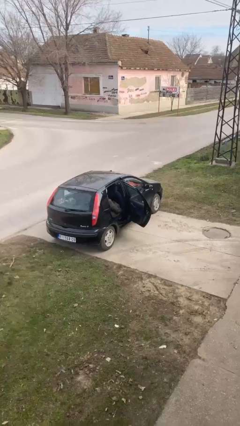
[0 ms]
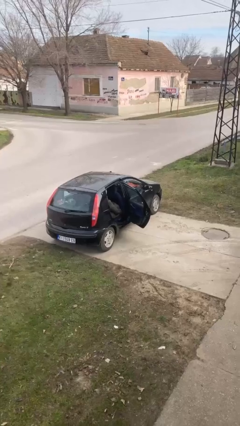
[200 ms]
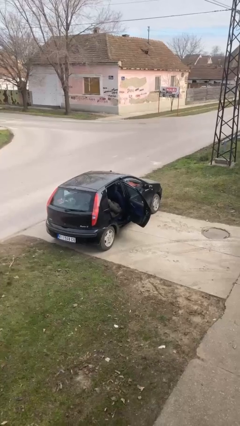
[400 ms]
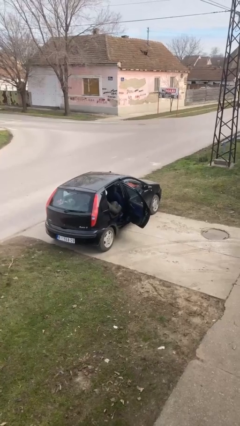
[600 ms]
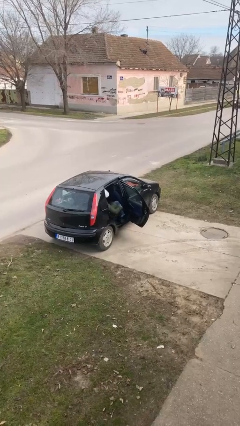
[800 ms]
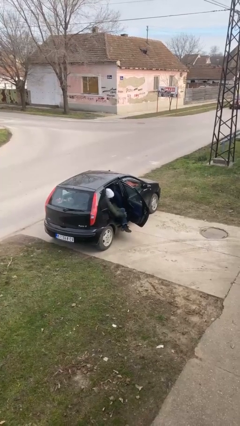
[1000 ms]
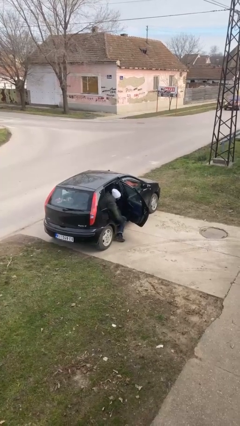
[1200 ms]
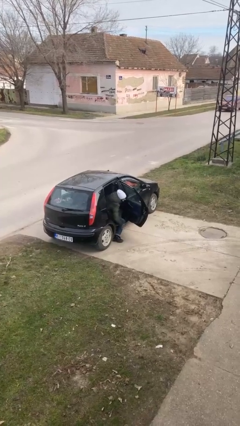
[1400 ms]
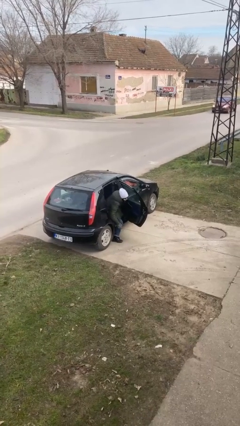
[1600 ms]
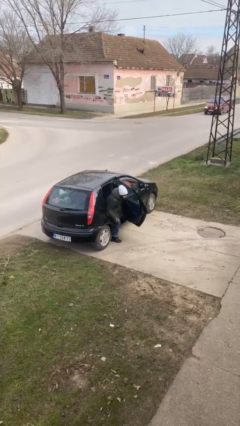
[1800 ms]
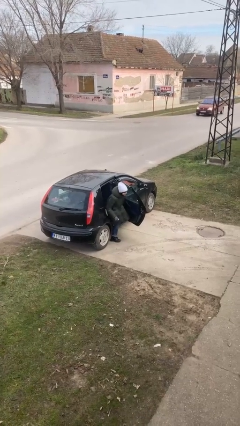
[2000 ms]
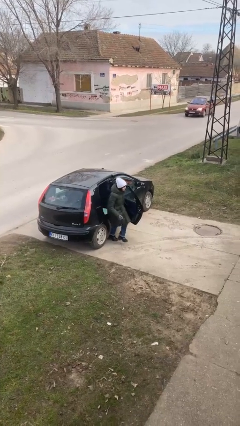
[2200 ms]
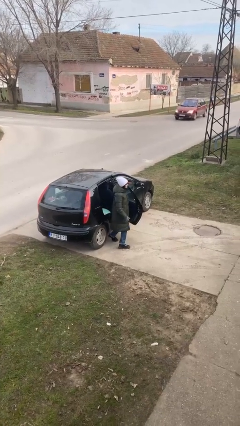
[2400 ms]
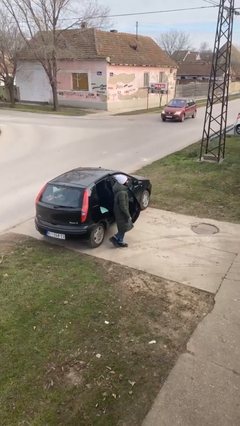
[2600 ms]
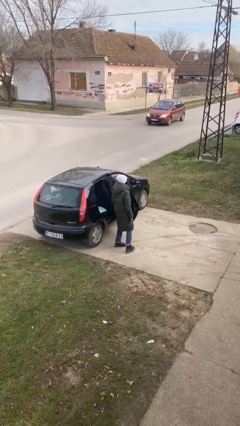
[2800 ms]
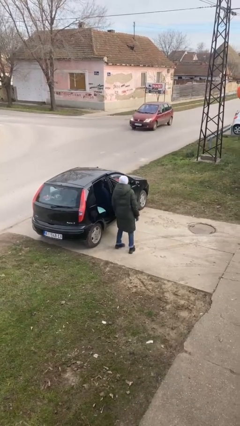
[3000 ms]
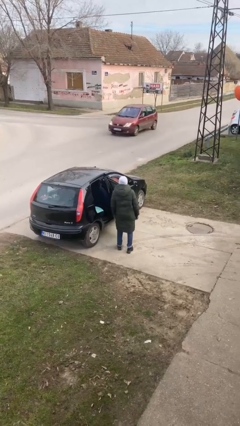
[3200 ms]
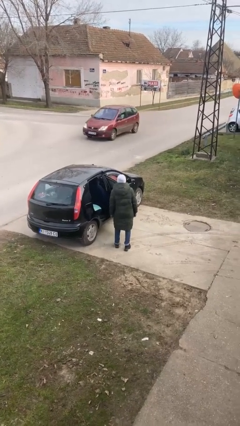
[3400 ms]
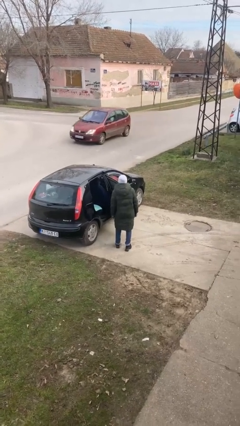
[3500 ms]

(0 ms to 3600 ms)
person exits car

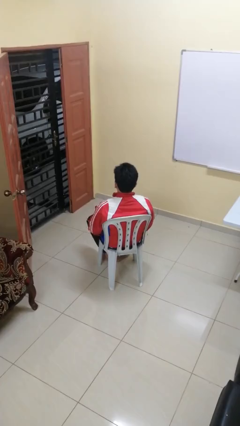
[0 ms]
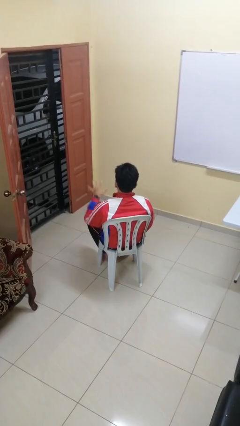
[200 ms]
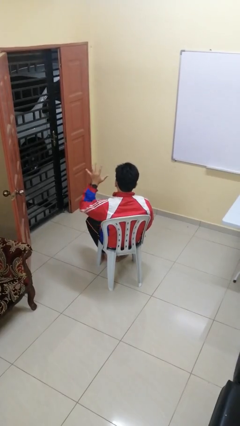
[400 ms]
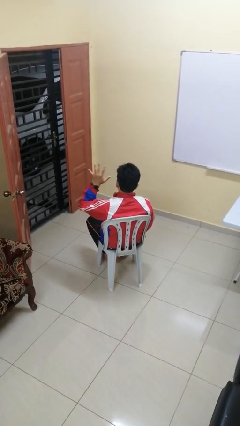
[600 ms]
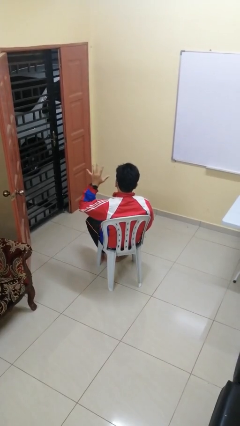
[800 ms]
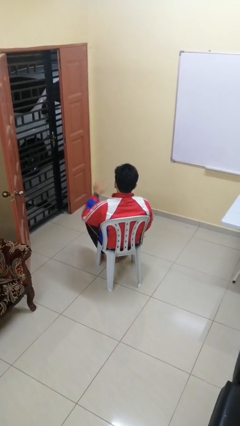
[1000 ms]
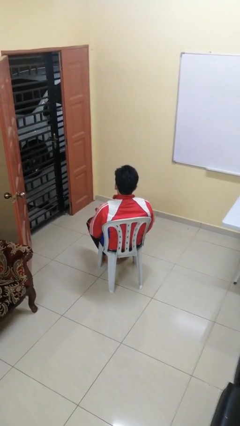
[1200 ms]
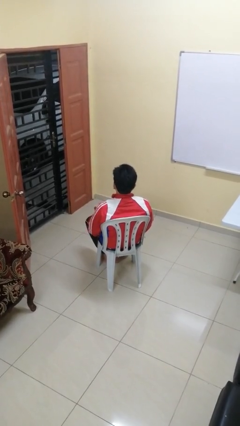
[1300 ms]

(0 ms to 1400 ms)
person gestures number five

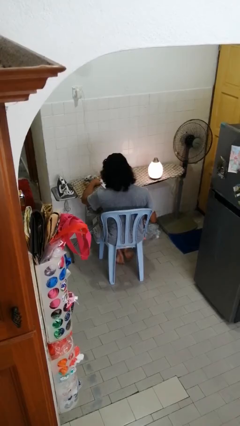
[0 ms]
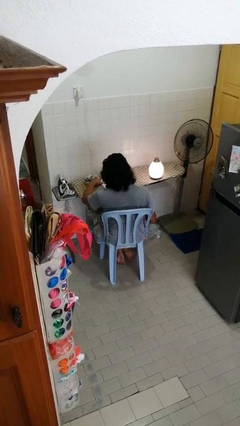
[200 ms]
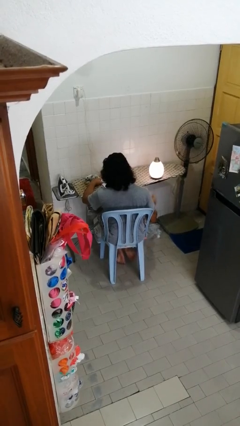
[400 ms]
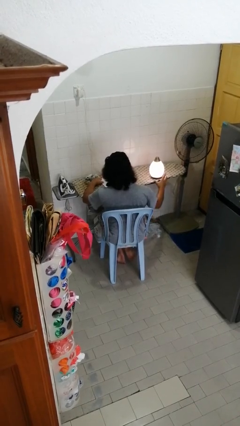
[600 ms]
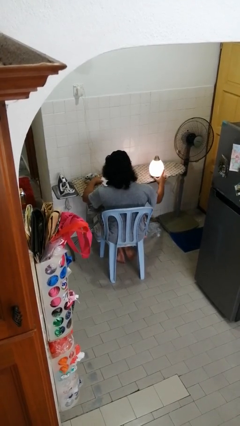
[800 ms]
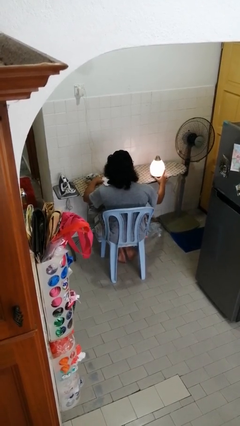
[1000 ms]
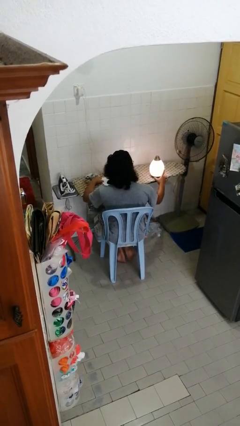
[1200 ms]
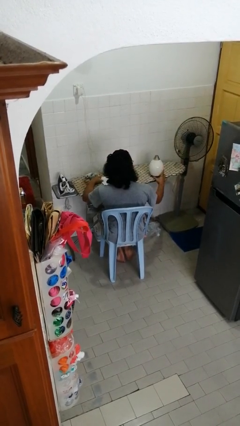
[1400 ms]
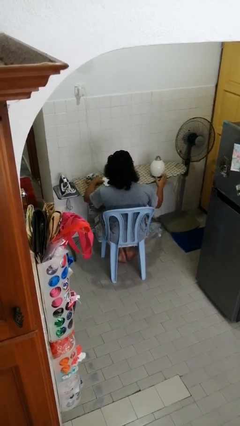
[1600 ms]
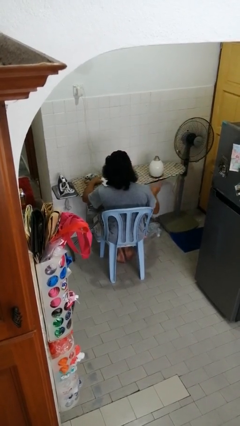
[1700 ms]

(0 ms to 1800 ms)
person turns off lamp

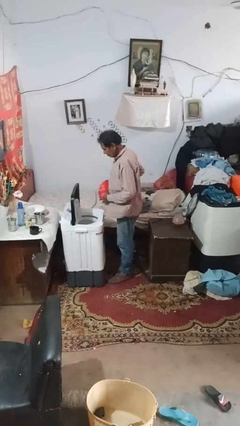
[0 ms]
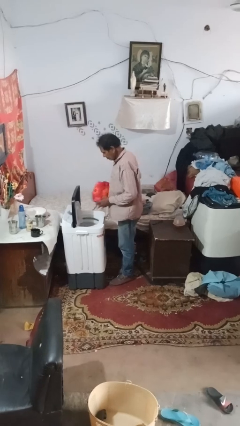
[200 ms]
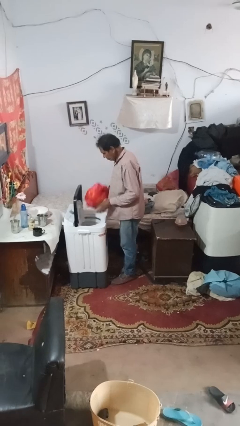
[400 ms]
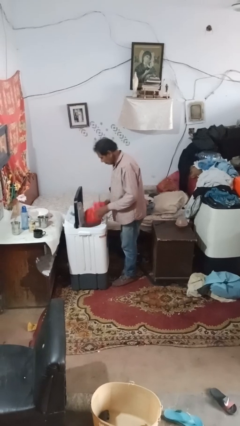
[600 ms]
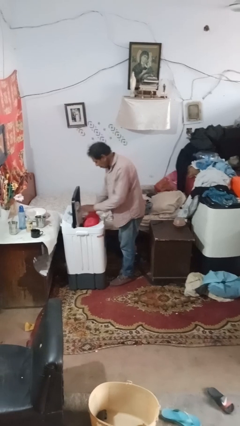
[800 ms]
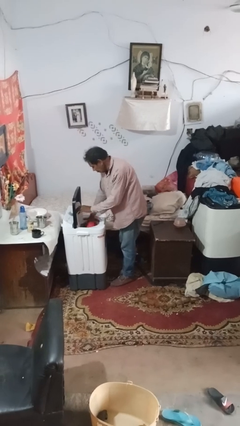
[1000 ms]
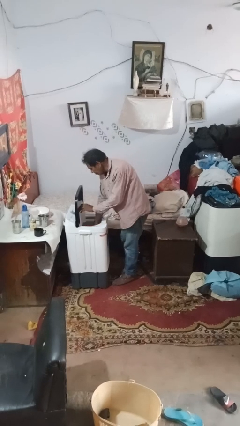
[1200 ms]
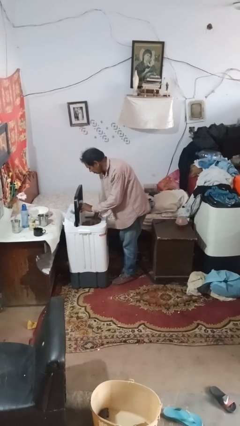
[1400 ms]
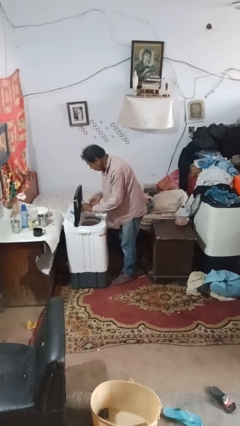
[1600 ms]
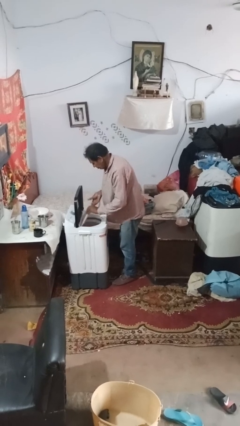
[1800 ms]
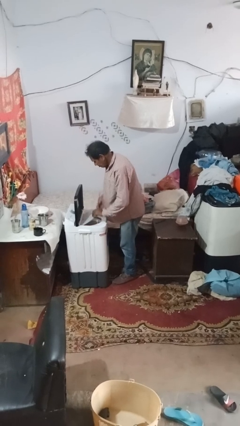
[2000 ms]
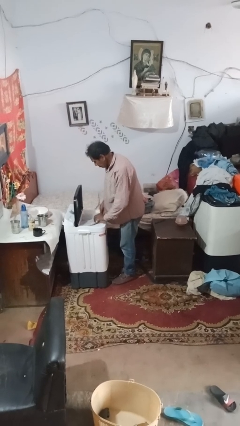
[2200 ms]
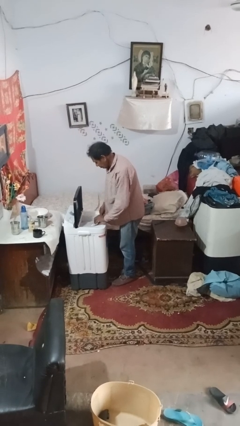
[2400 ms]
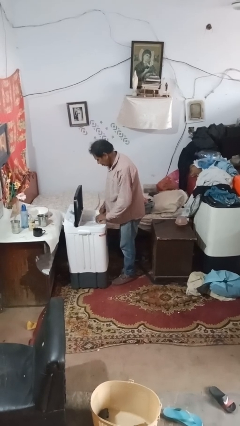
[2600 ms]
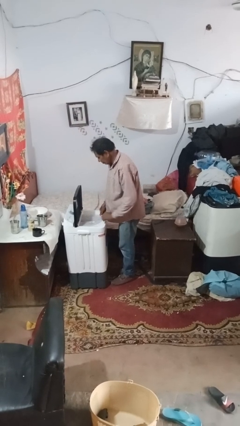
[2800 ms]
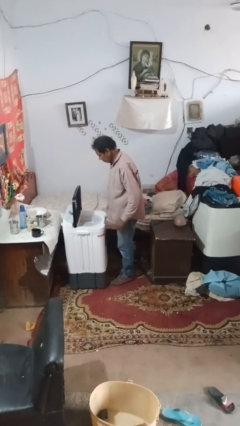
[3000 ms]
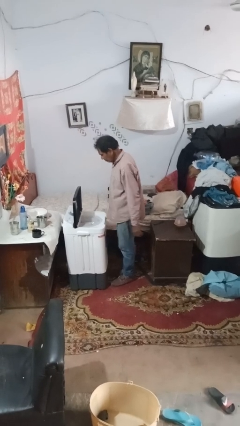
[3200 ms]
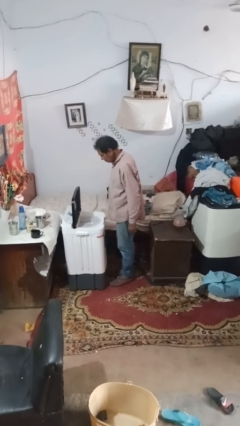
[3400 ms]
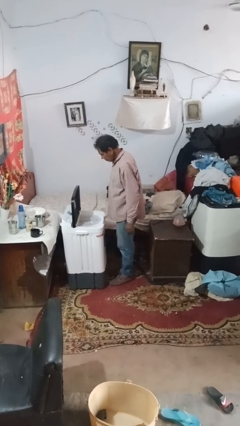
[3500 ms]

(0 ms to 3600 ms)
person loads dryer

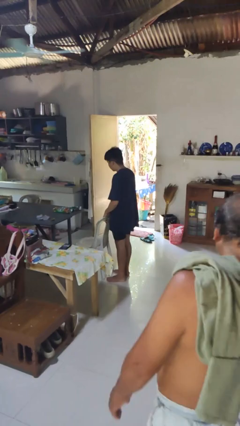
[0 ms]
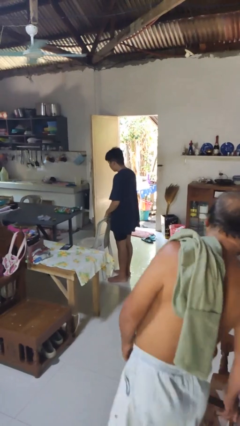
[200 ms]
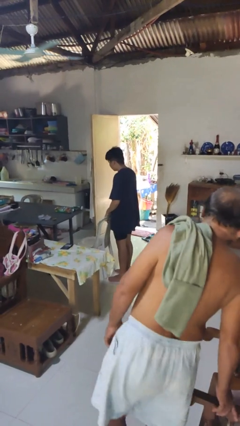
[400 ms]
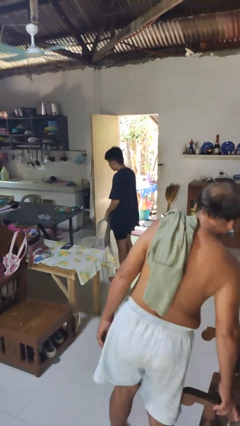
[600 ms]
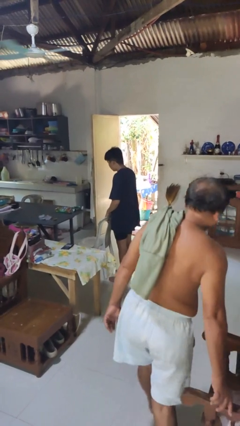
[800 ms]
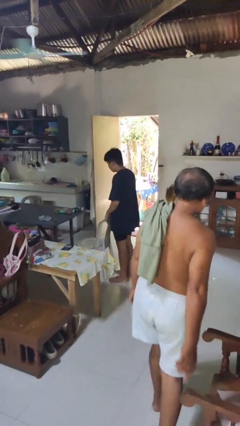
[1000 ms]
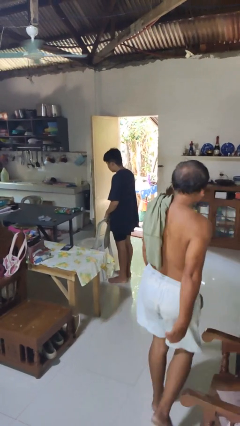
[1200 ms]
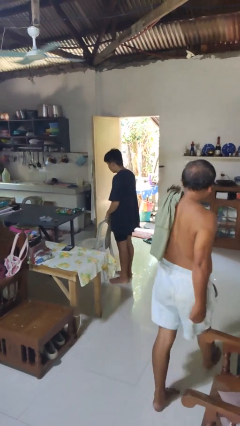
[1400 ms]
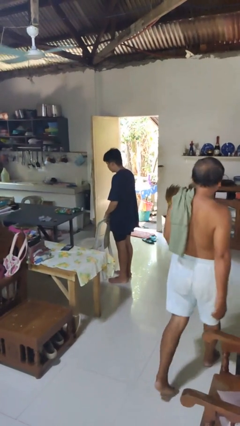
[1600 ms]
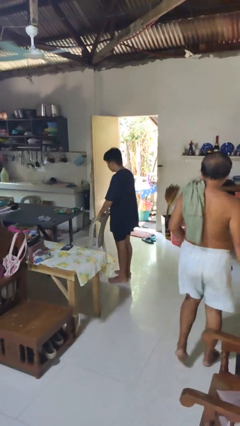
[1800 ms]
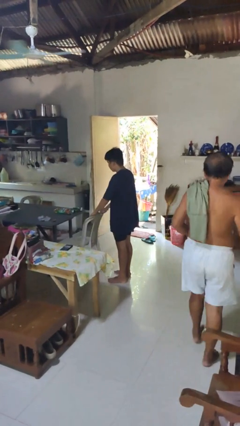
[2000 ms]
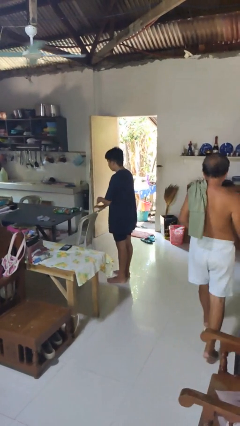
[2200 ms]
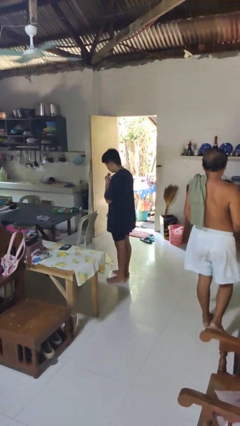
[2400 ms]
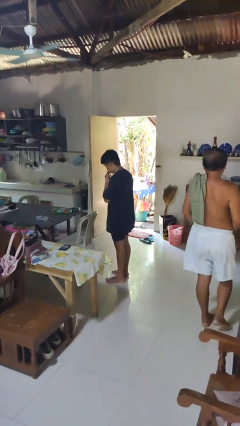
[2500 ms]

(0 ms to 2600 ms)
person pushes in chair

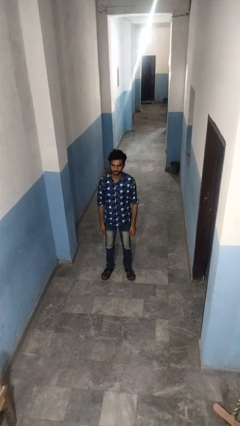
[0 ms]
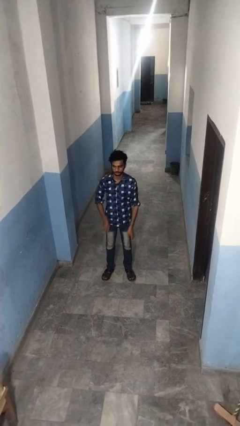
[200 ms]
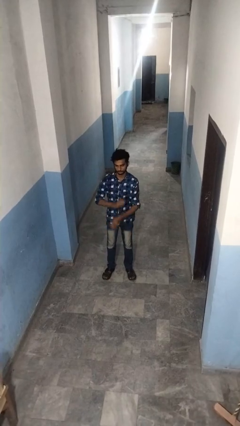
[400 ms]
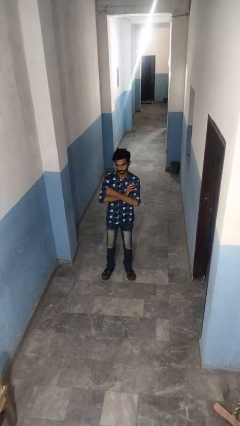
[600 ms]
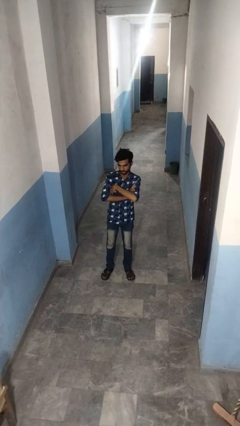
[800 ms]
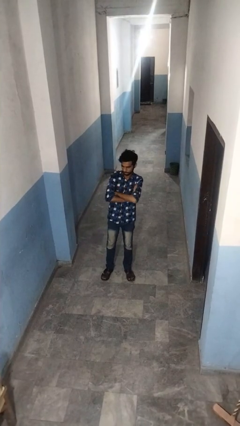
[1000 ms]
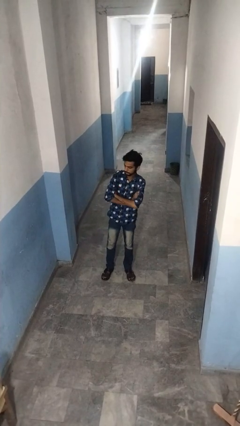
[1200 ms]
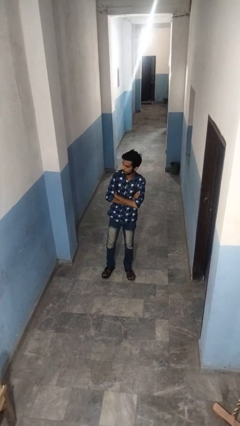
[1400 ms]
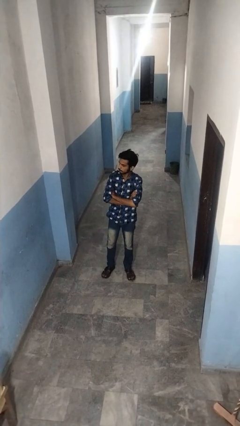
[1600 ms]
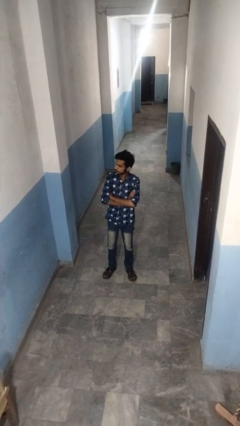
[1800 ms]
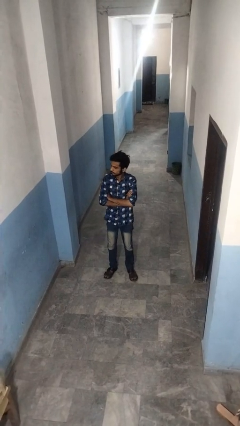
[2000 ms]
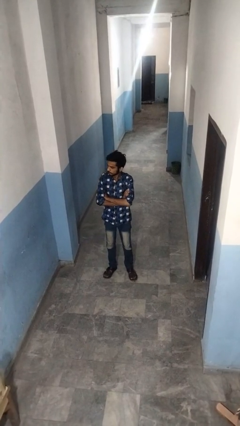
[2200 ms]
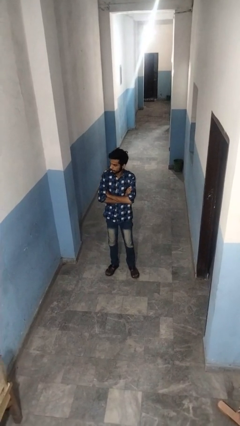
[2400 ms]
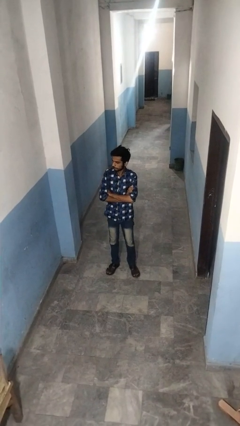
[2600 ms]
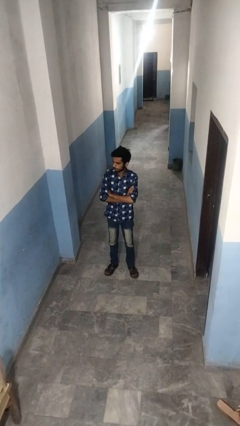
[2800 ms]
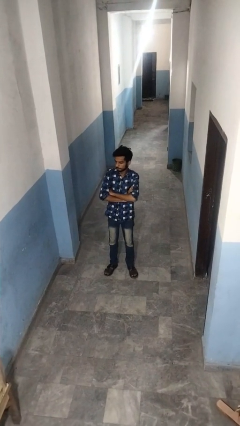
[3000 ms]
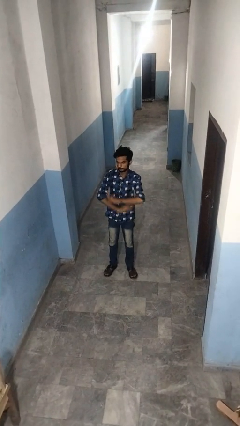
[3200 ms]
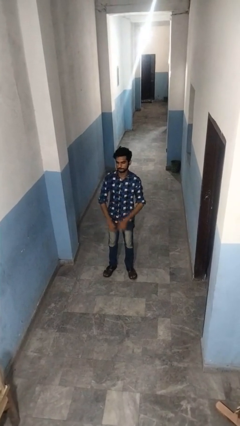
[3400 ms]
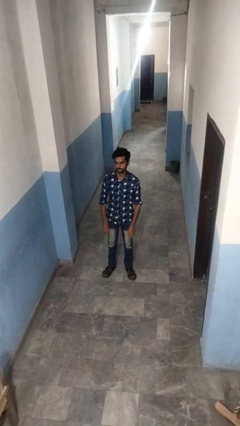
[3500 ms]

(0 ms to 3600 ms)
person crosses arms

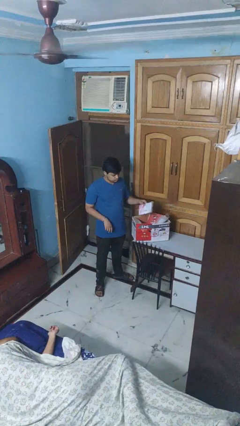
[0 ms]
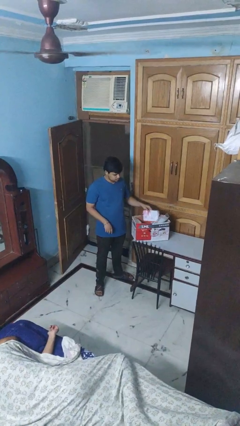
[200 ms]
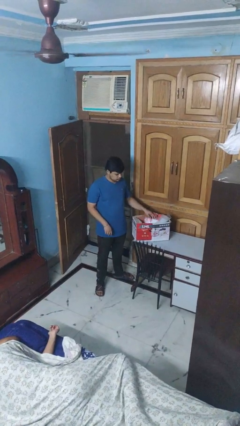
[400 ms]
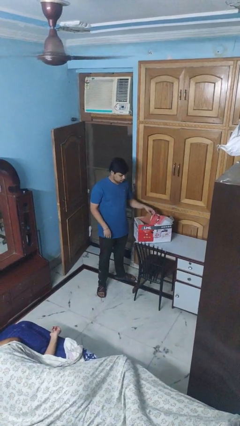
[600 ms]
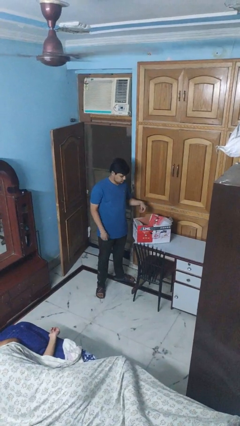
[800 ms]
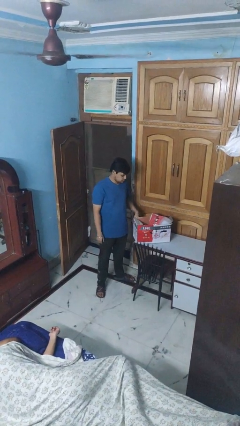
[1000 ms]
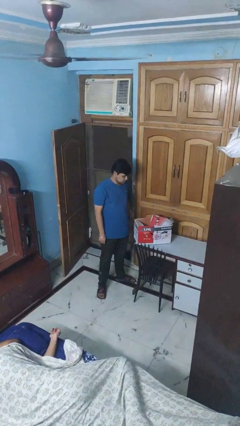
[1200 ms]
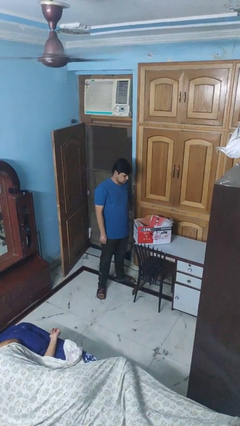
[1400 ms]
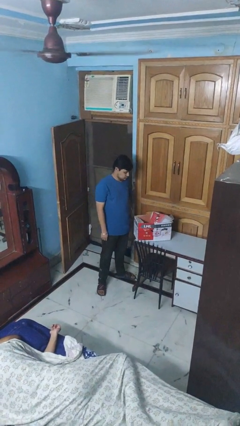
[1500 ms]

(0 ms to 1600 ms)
person puts object into box
